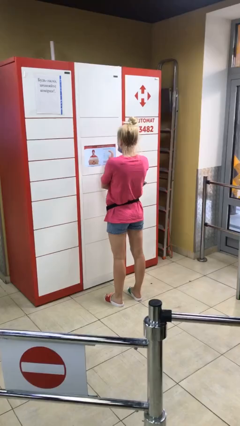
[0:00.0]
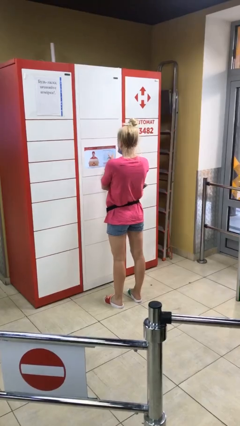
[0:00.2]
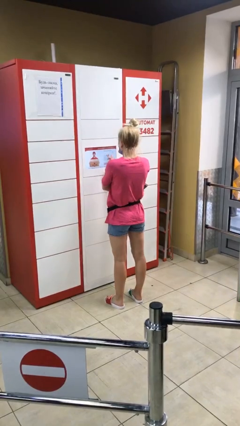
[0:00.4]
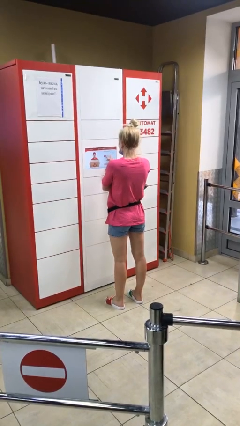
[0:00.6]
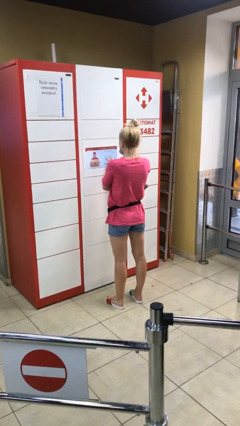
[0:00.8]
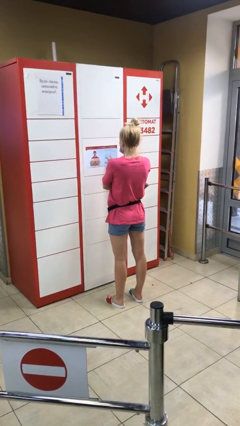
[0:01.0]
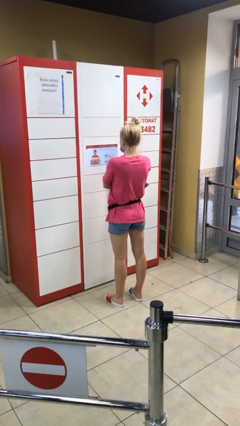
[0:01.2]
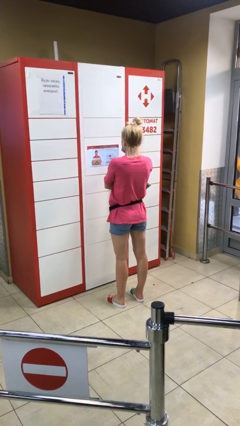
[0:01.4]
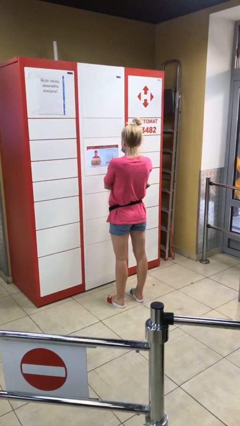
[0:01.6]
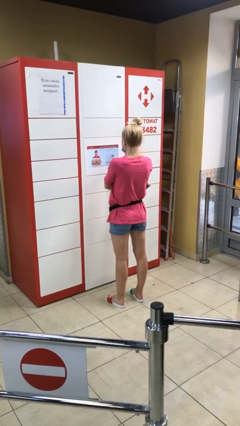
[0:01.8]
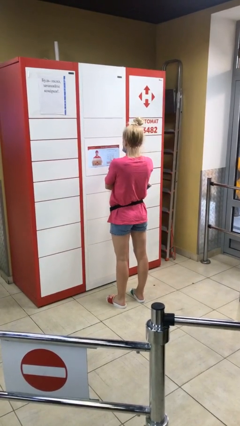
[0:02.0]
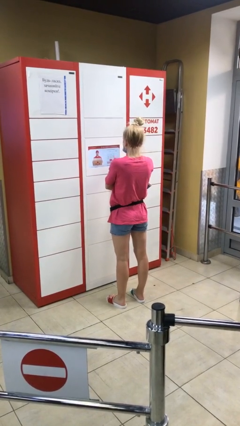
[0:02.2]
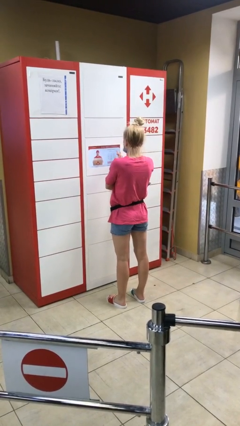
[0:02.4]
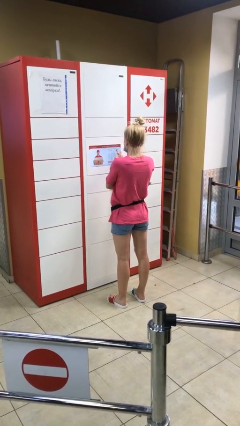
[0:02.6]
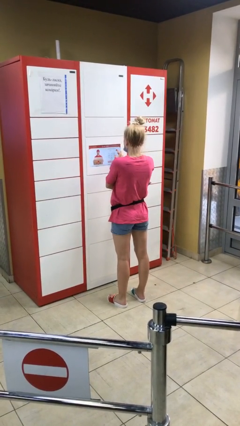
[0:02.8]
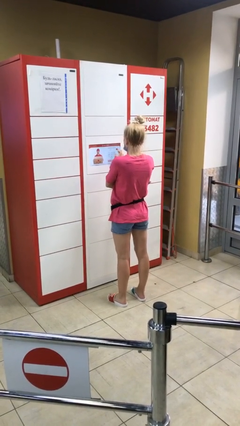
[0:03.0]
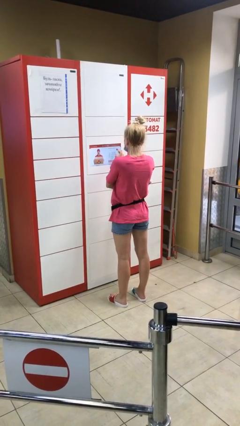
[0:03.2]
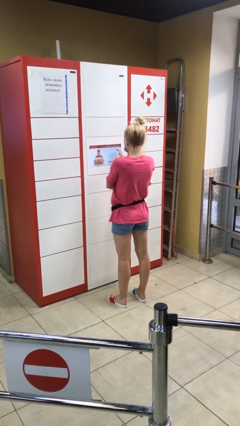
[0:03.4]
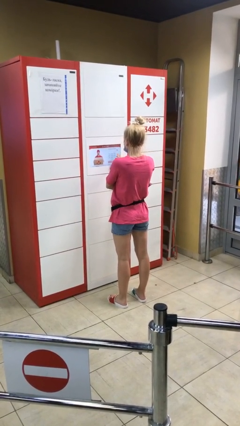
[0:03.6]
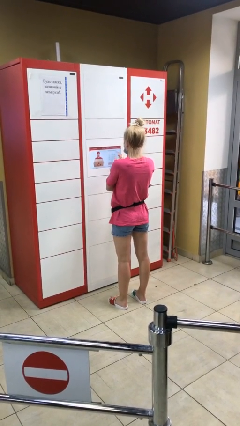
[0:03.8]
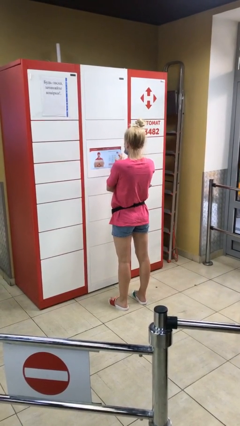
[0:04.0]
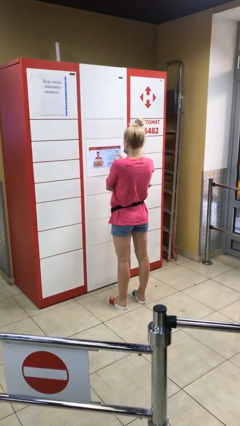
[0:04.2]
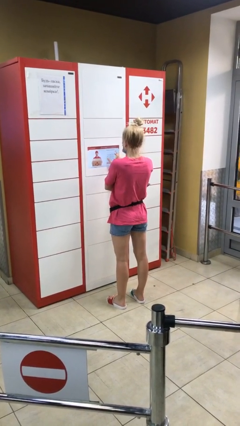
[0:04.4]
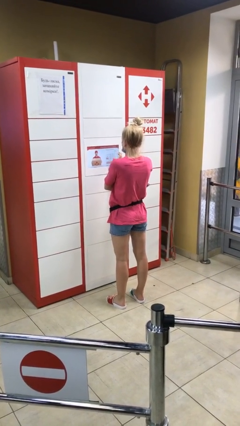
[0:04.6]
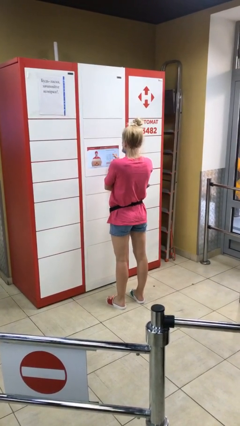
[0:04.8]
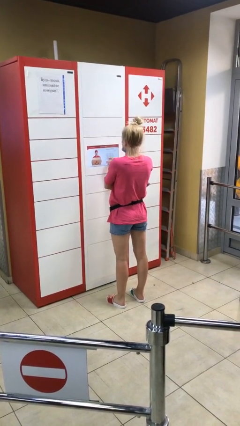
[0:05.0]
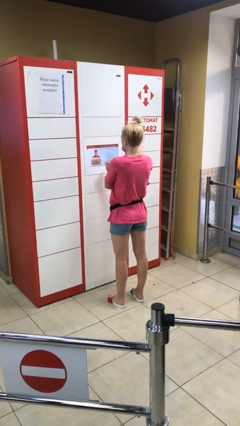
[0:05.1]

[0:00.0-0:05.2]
person purchases from machine

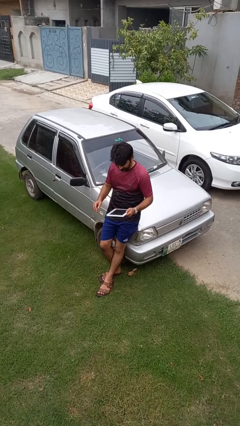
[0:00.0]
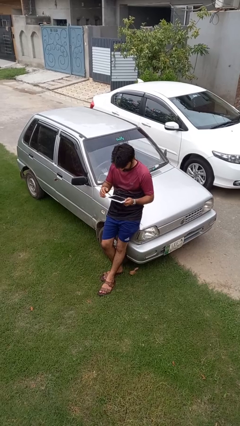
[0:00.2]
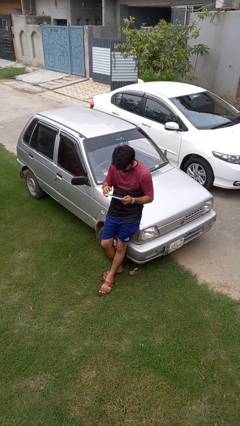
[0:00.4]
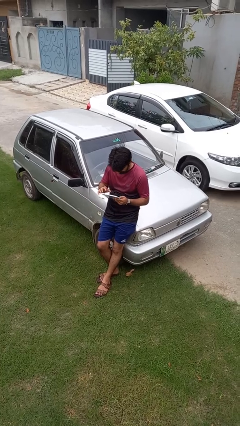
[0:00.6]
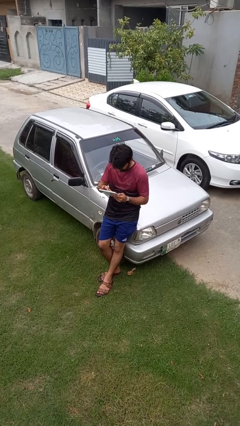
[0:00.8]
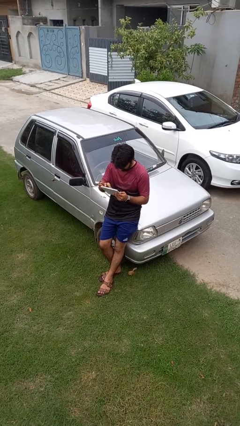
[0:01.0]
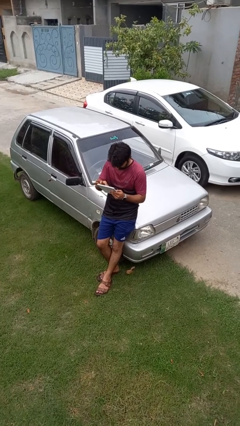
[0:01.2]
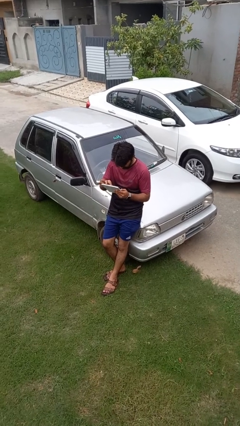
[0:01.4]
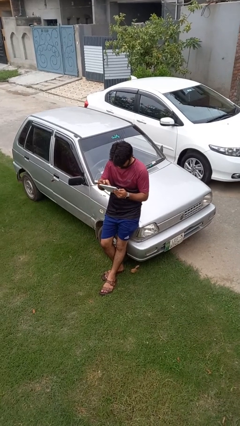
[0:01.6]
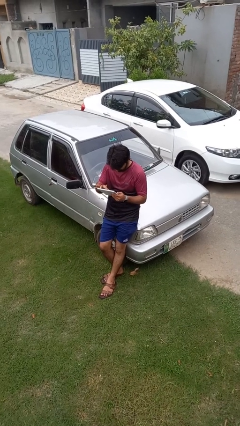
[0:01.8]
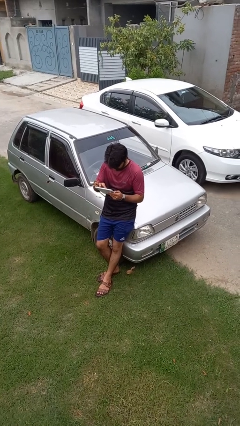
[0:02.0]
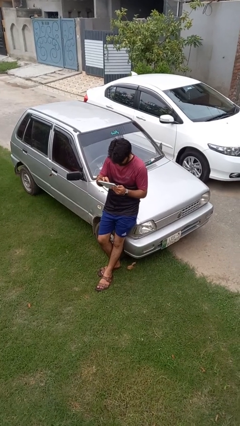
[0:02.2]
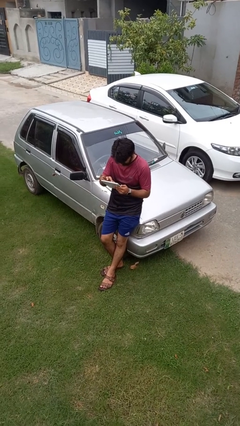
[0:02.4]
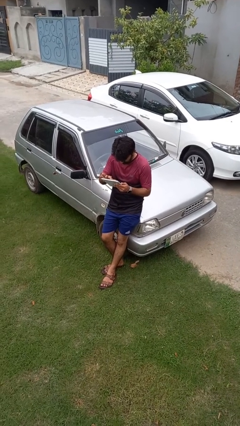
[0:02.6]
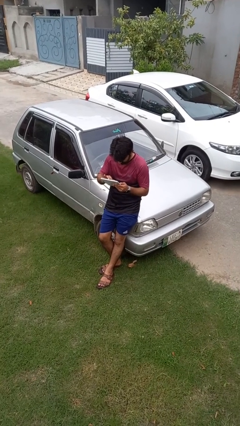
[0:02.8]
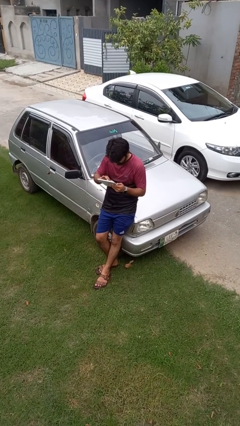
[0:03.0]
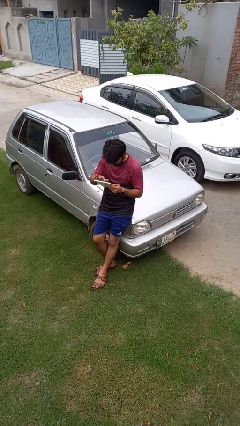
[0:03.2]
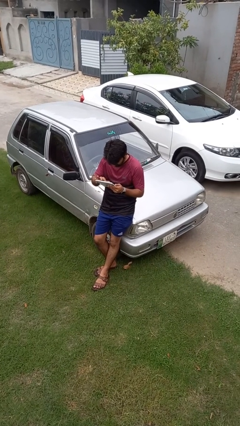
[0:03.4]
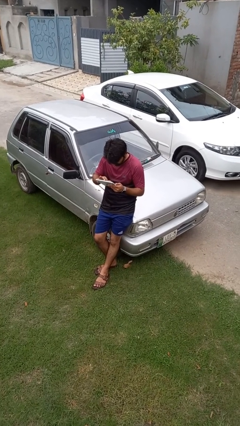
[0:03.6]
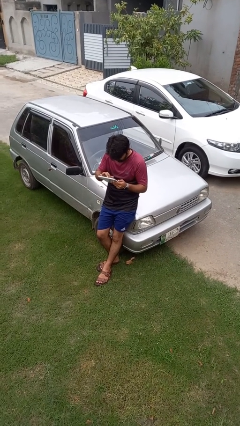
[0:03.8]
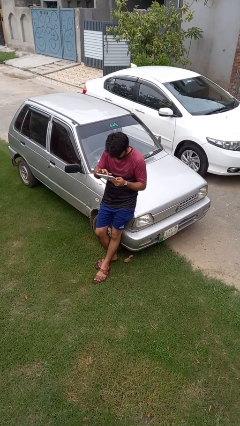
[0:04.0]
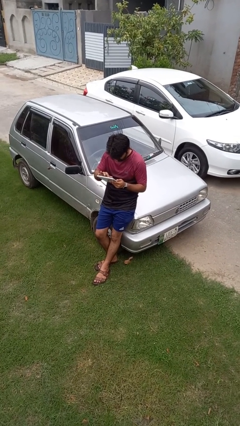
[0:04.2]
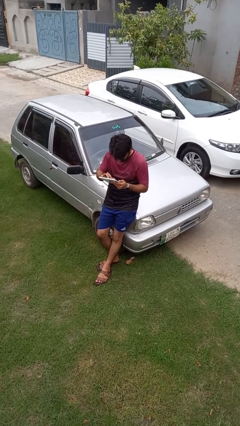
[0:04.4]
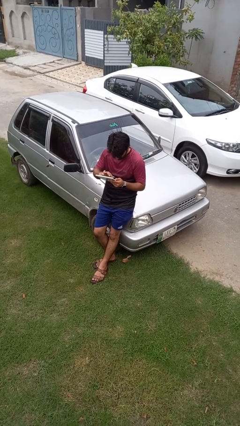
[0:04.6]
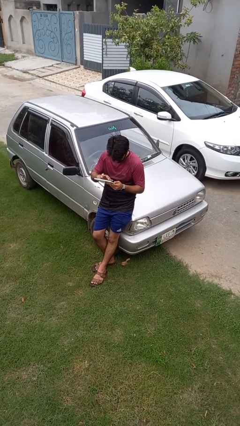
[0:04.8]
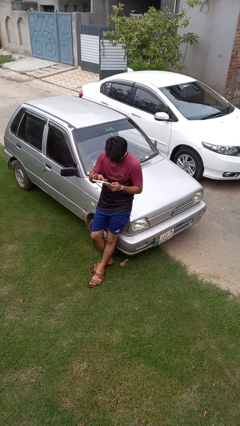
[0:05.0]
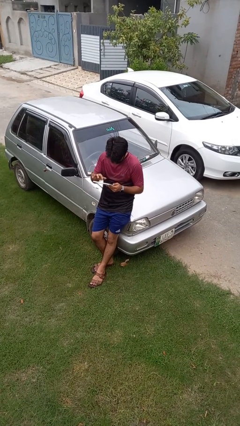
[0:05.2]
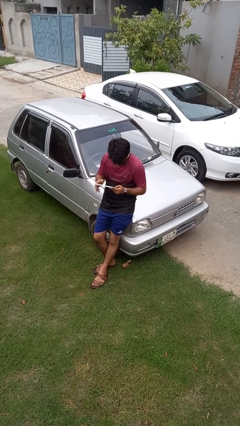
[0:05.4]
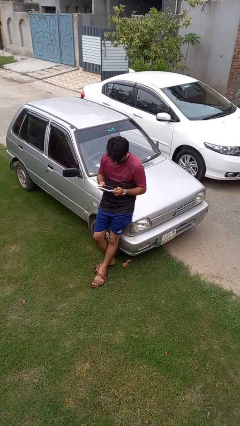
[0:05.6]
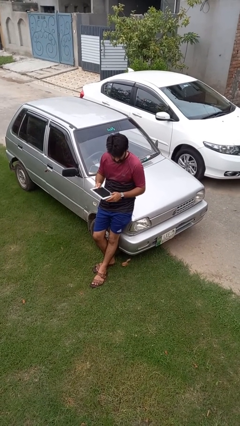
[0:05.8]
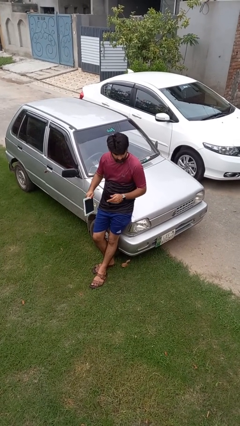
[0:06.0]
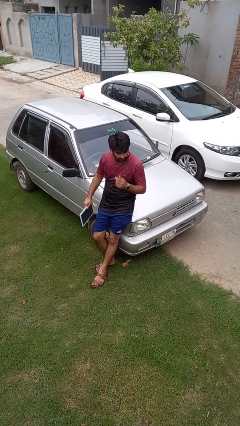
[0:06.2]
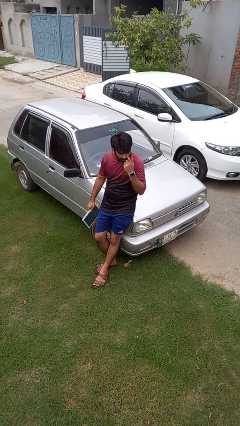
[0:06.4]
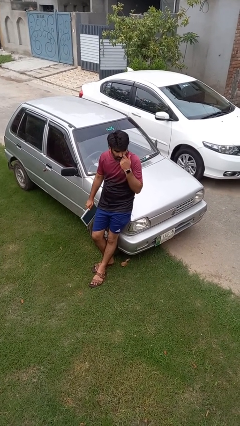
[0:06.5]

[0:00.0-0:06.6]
person interacts with tablet

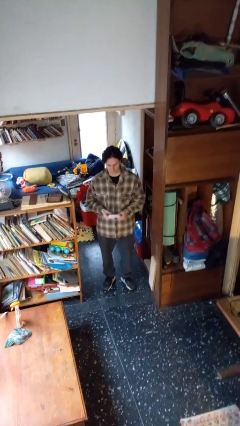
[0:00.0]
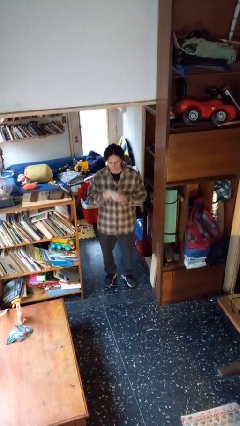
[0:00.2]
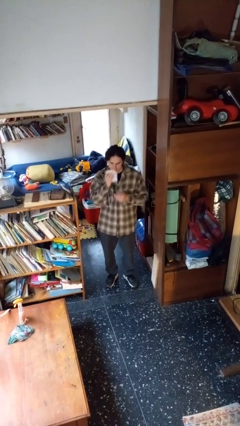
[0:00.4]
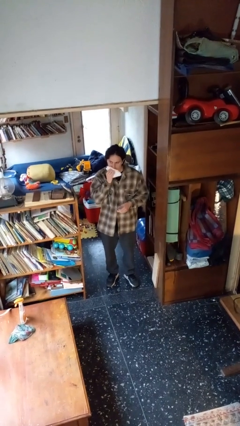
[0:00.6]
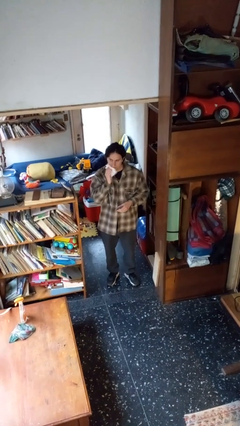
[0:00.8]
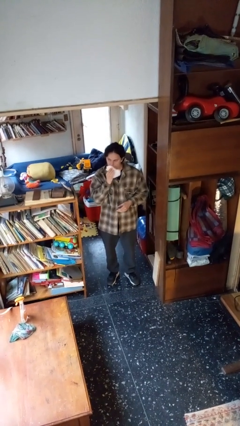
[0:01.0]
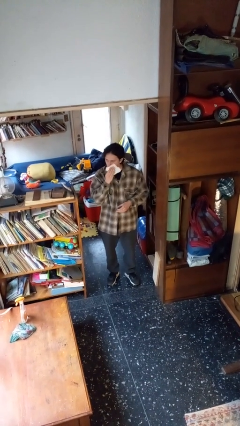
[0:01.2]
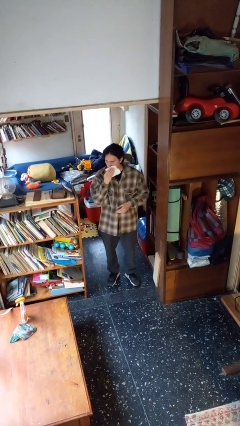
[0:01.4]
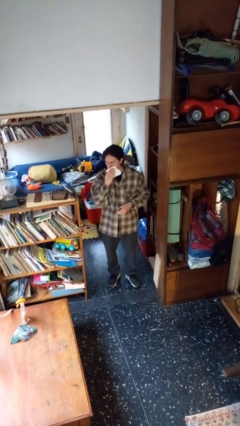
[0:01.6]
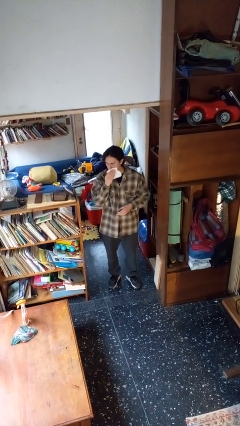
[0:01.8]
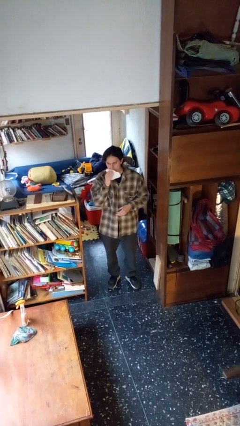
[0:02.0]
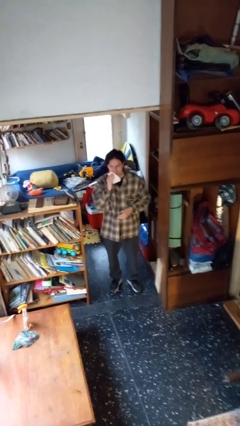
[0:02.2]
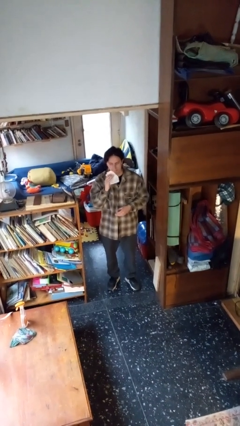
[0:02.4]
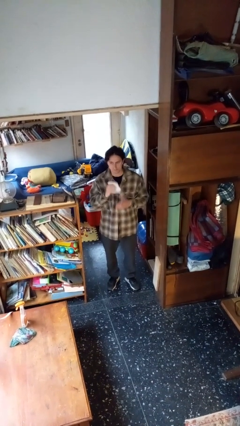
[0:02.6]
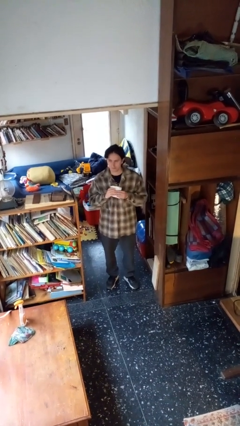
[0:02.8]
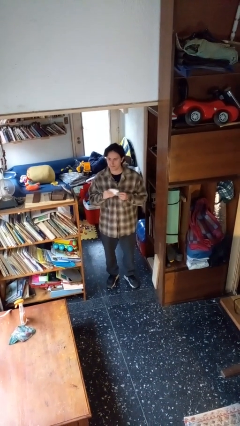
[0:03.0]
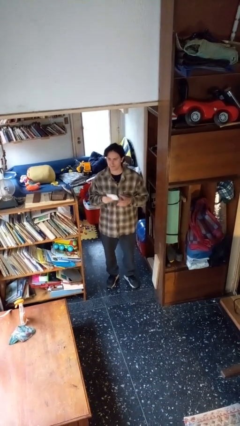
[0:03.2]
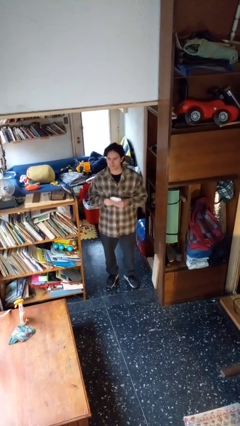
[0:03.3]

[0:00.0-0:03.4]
person wipes mouth with napkin

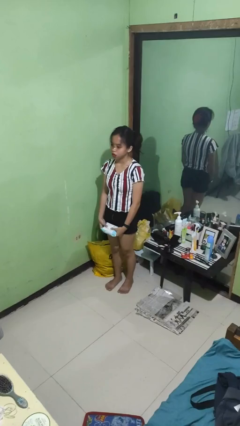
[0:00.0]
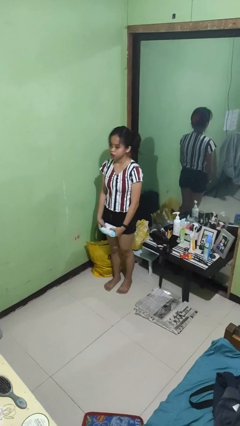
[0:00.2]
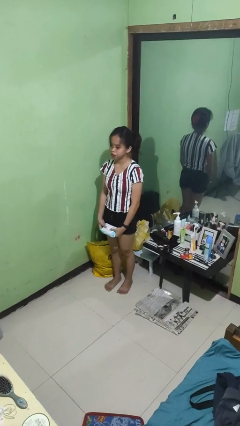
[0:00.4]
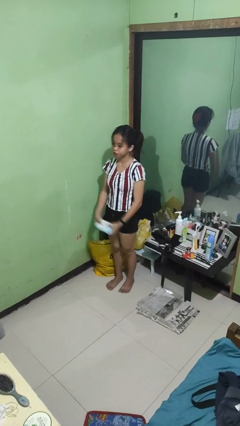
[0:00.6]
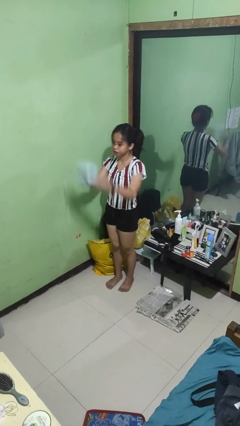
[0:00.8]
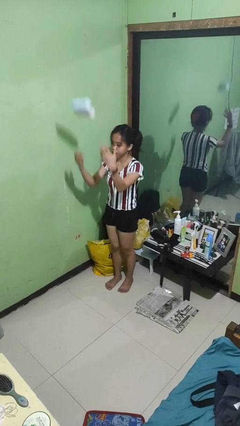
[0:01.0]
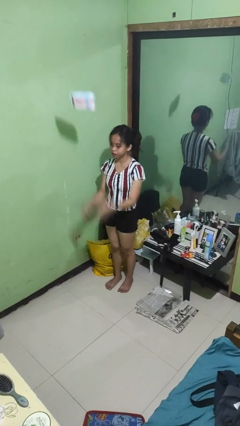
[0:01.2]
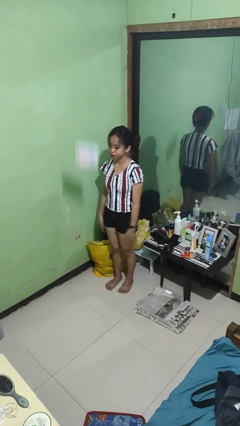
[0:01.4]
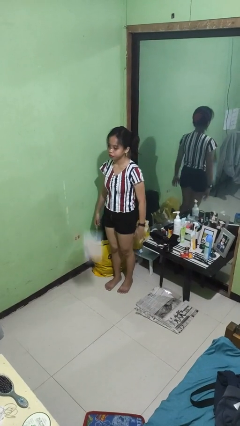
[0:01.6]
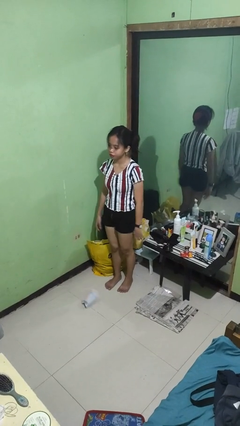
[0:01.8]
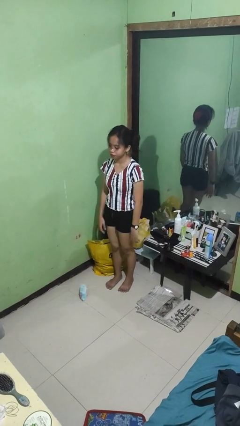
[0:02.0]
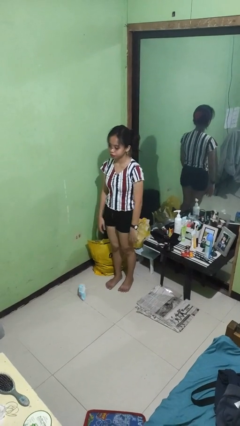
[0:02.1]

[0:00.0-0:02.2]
person throws object into air

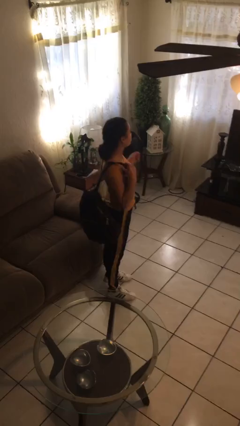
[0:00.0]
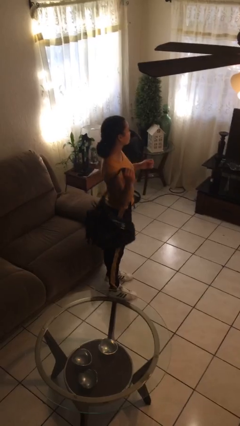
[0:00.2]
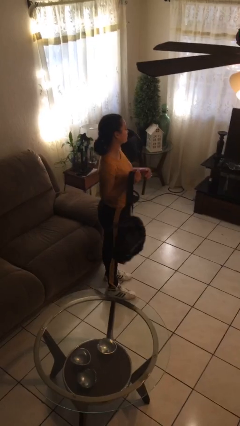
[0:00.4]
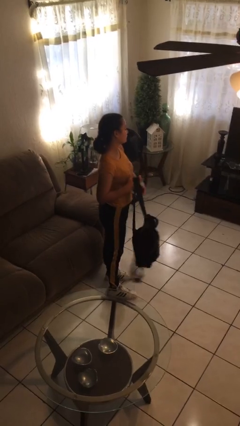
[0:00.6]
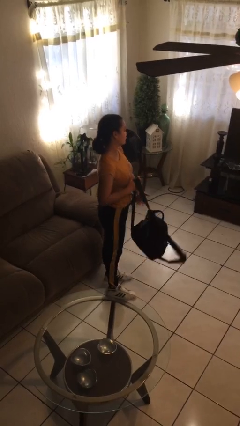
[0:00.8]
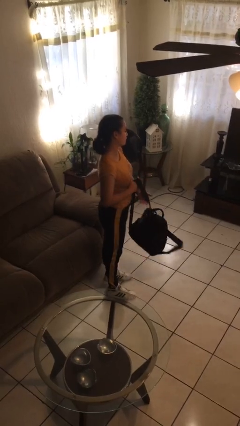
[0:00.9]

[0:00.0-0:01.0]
person takes off backpack
